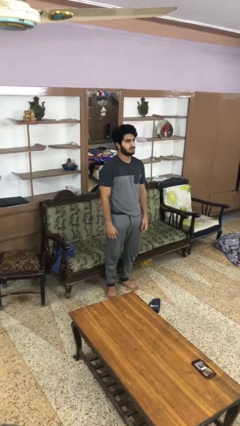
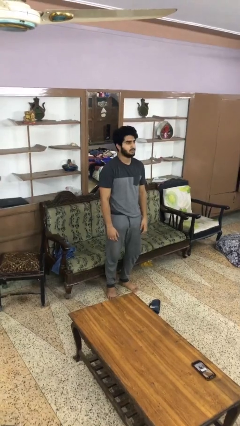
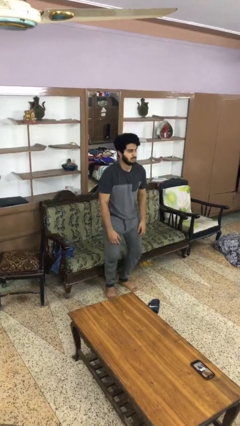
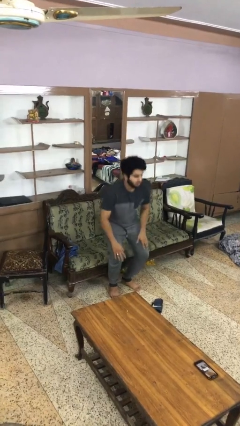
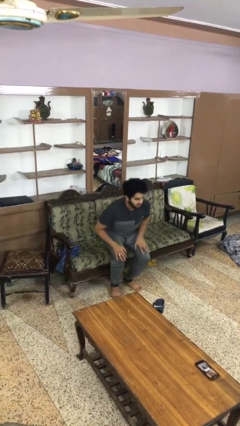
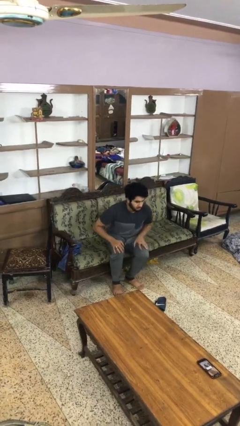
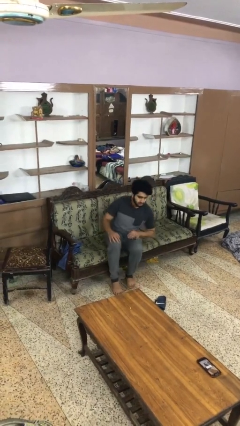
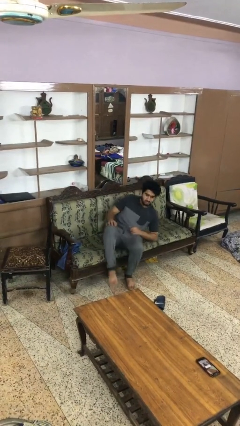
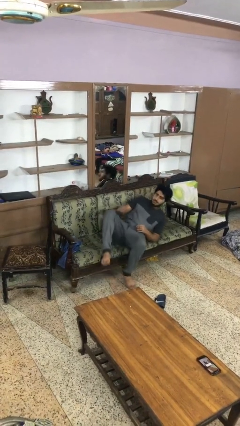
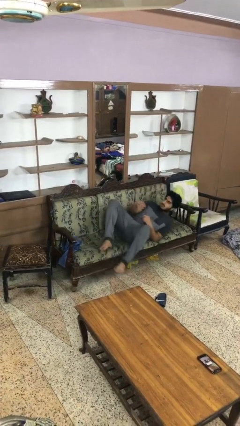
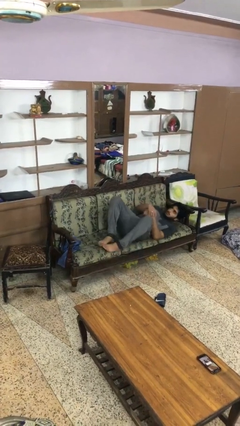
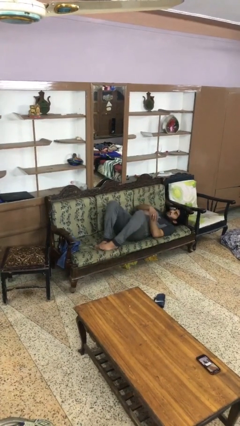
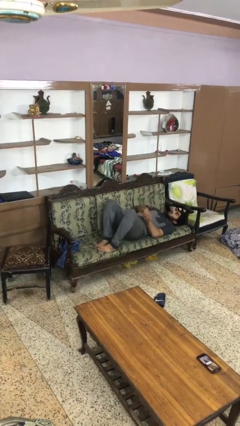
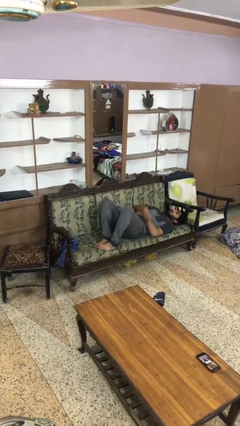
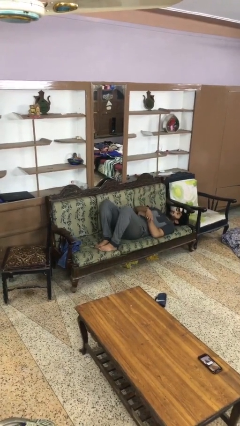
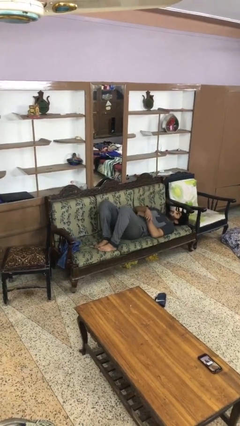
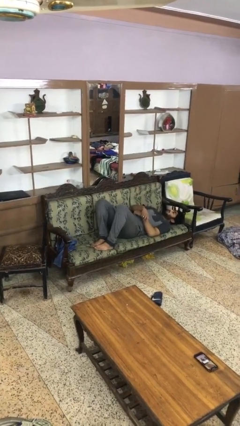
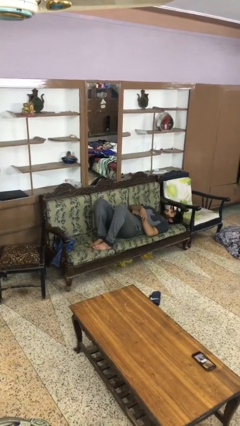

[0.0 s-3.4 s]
person lies down on couch

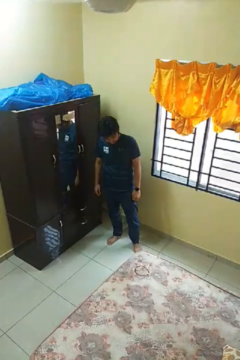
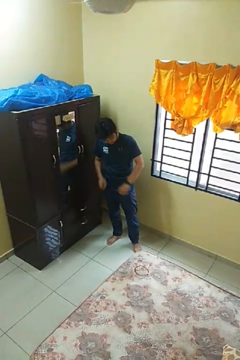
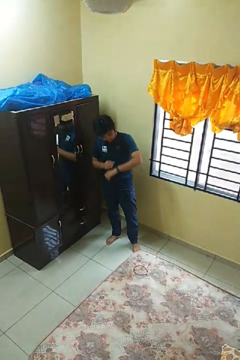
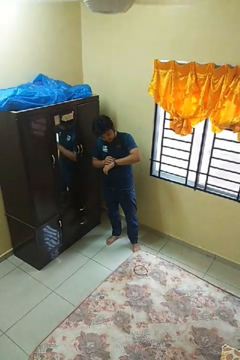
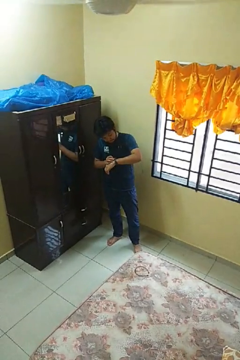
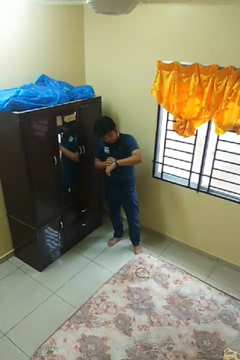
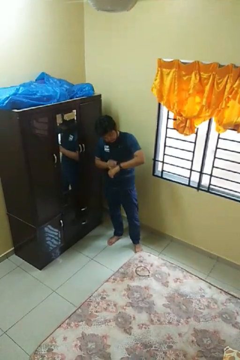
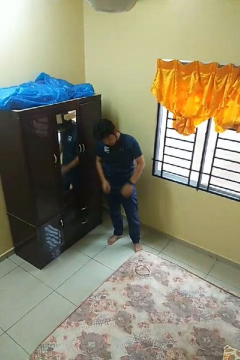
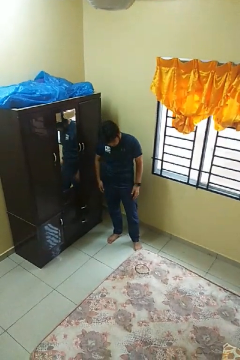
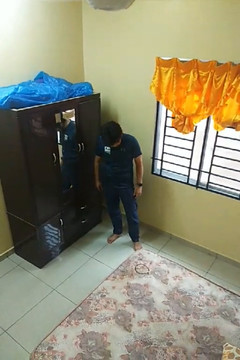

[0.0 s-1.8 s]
person looks at wristwatch

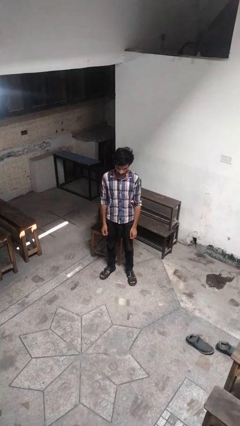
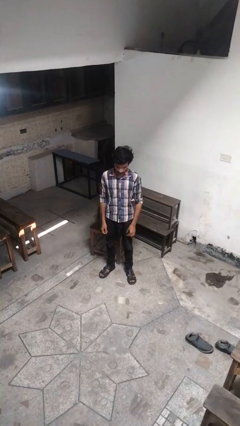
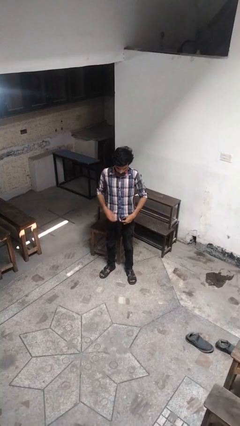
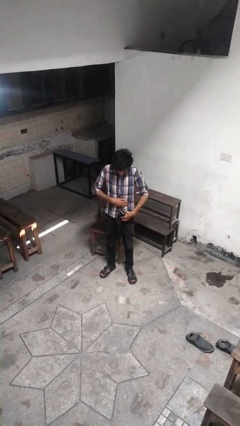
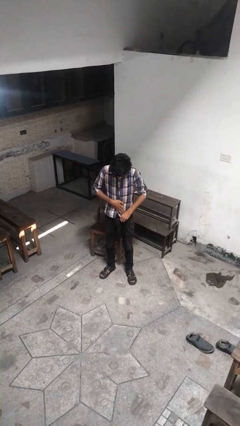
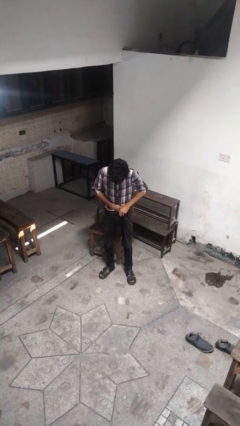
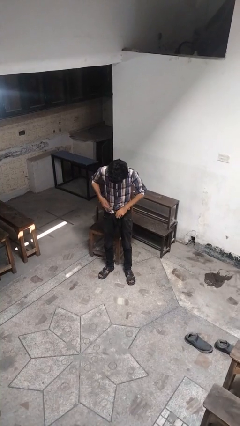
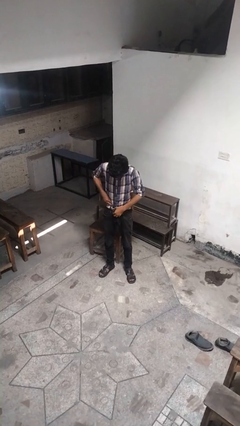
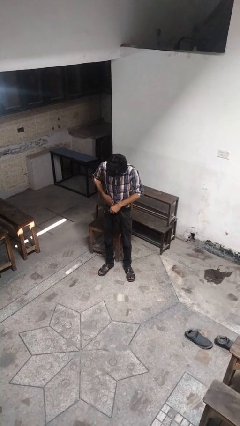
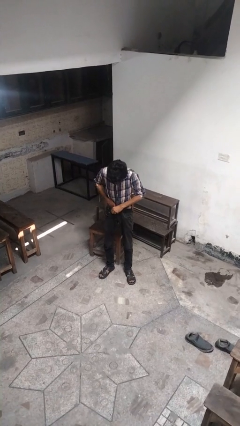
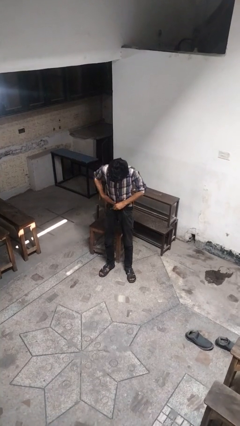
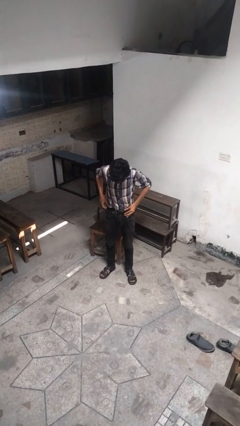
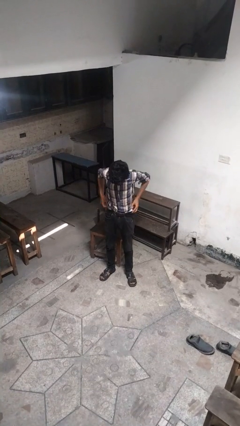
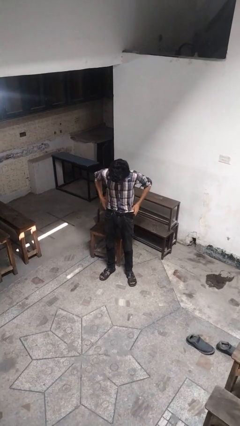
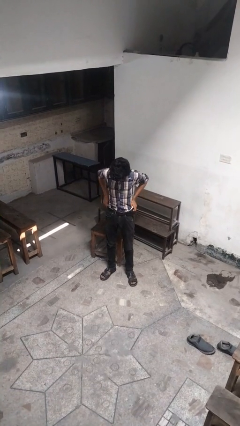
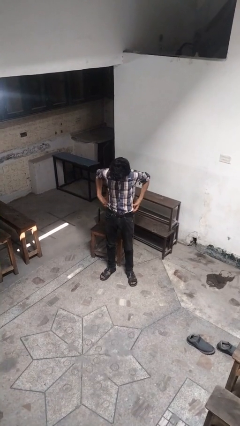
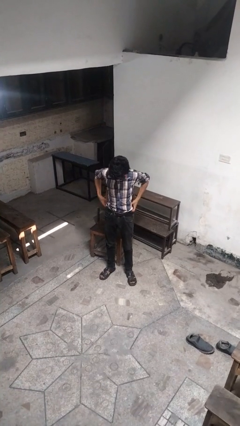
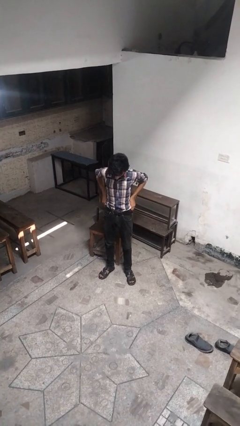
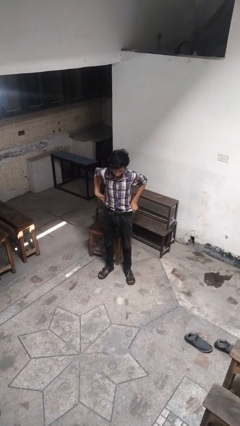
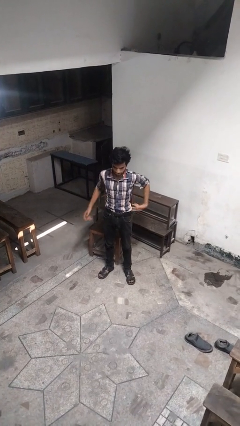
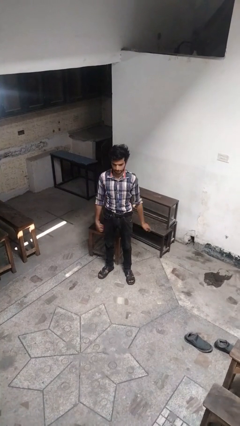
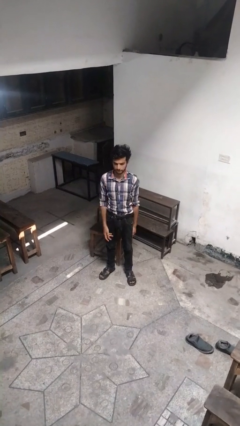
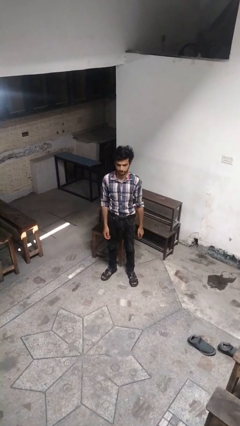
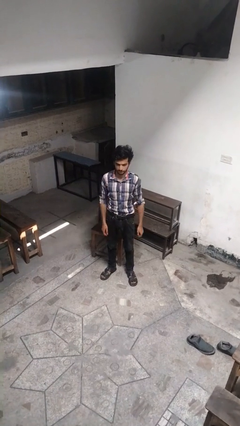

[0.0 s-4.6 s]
person tucks in shirt

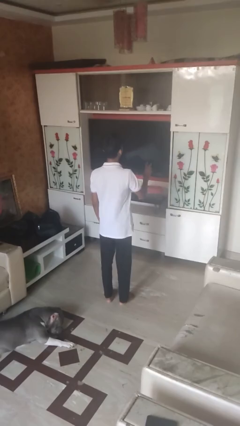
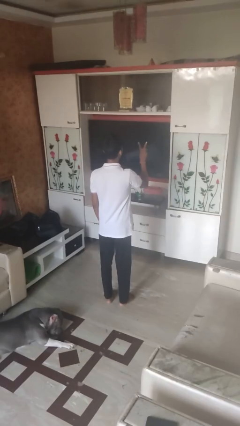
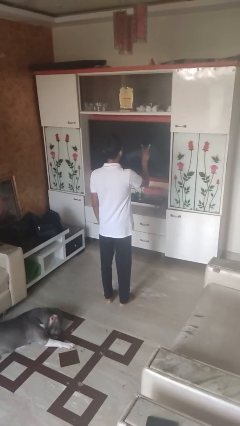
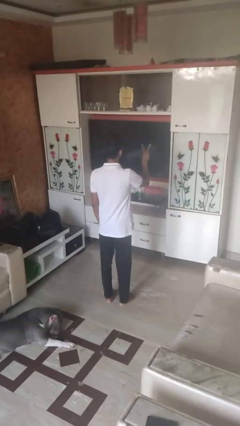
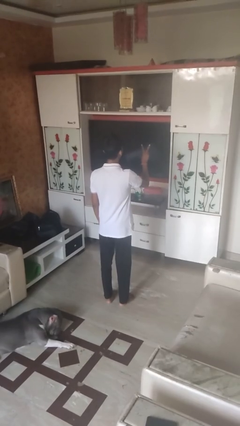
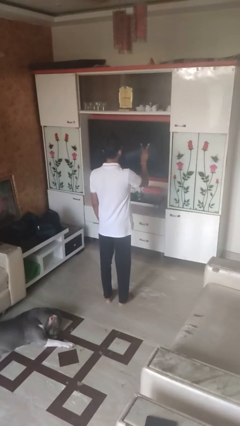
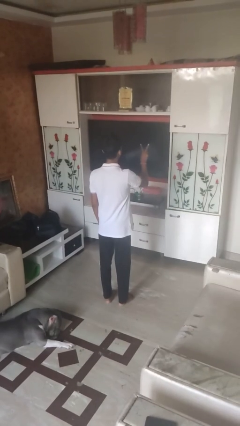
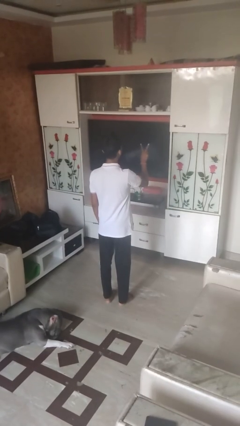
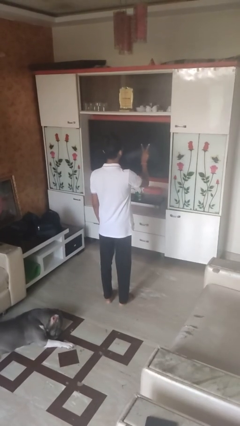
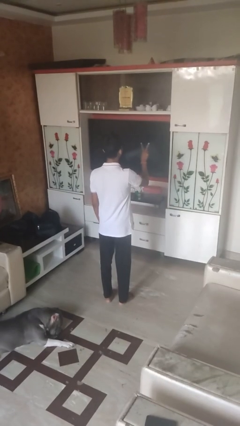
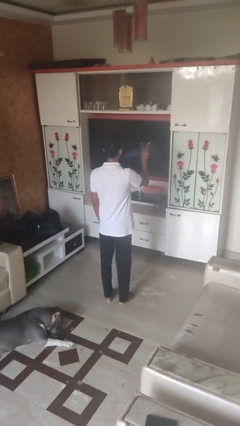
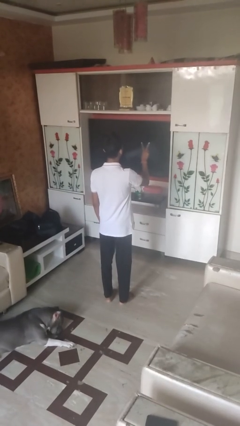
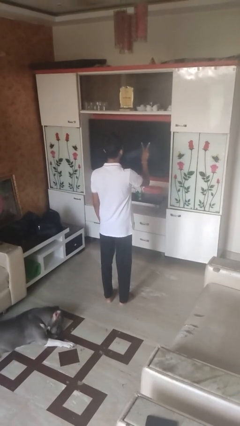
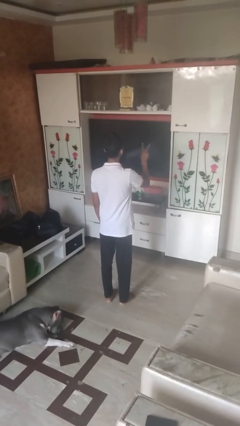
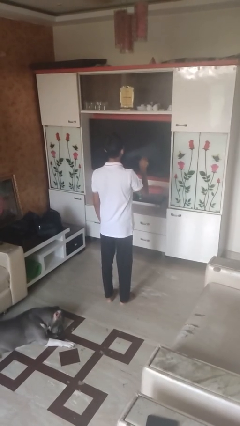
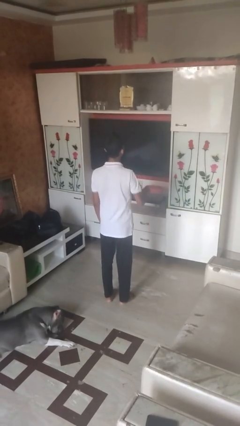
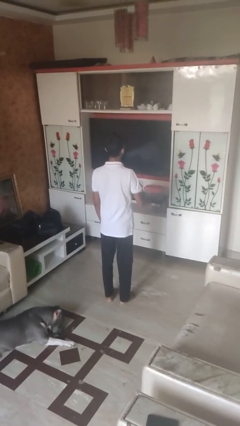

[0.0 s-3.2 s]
person gestures peace

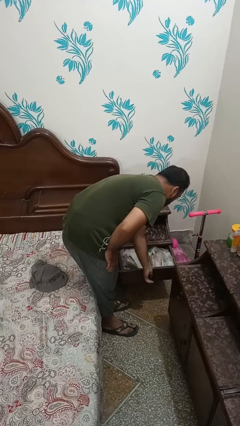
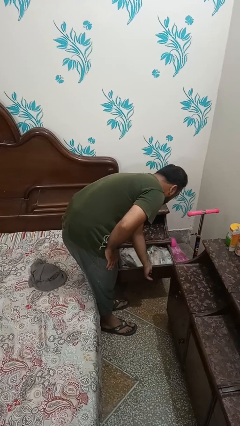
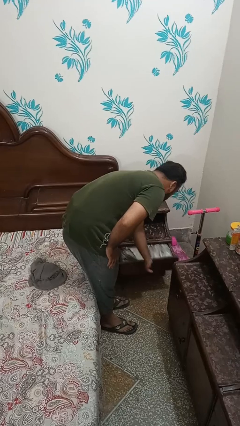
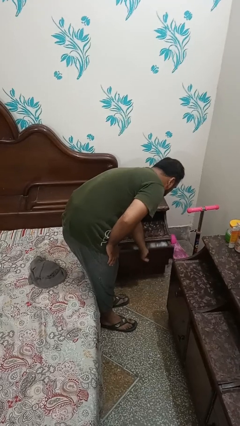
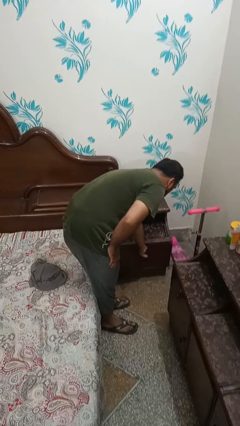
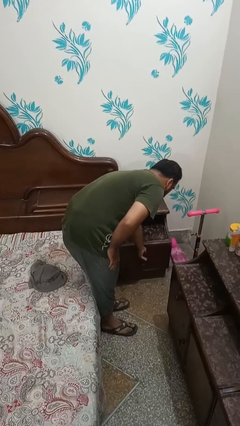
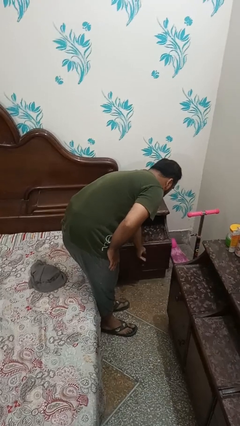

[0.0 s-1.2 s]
person closes dresser drawer

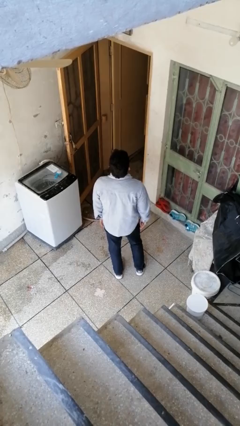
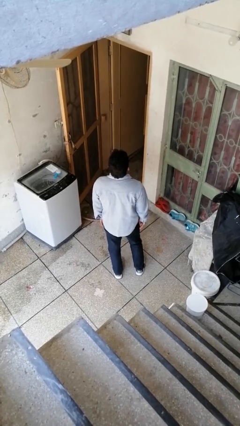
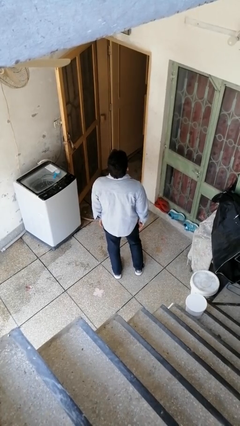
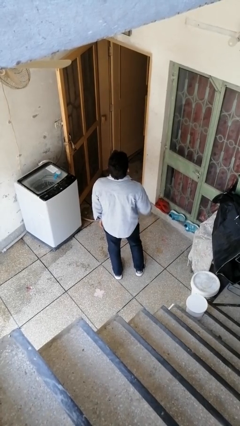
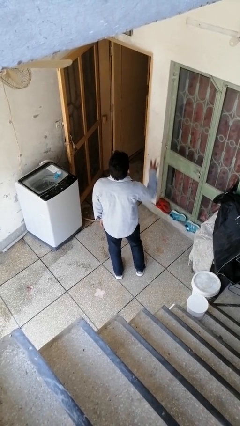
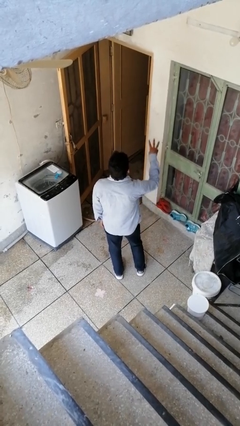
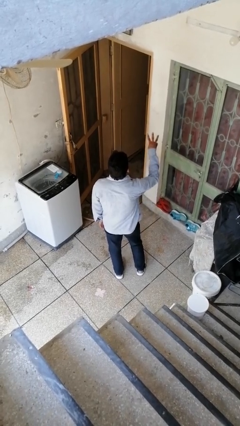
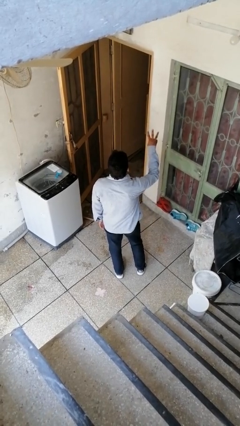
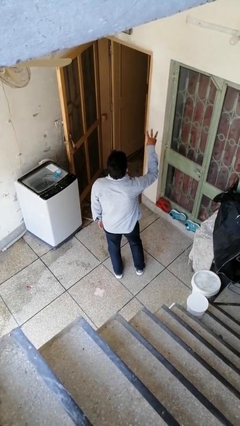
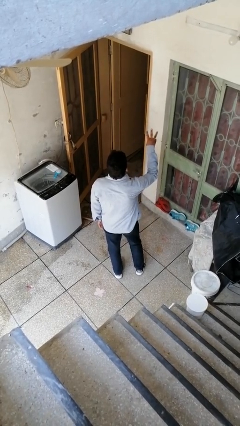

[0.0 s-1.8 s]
person gestures number three

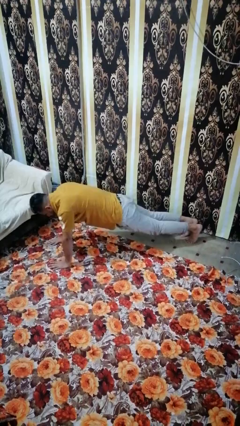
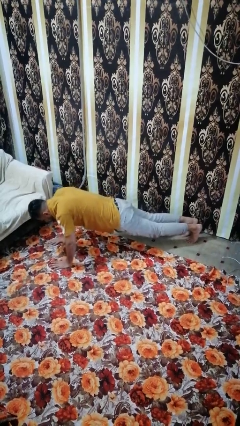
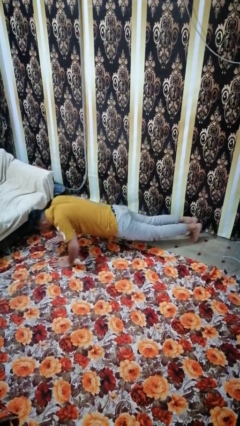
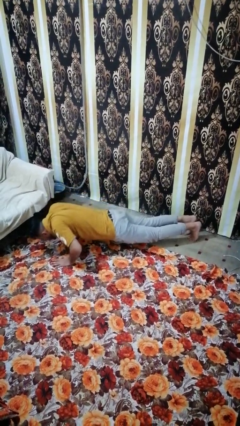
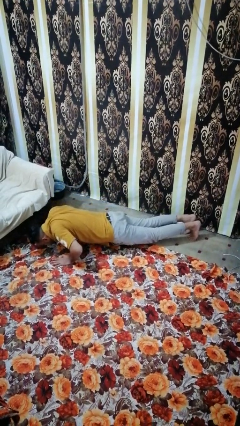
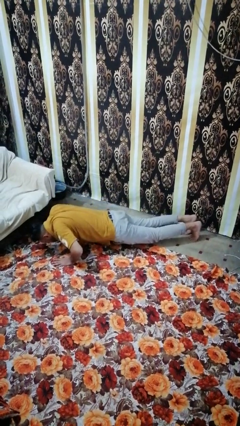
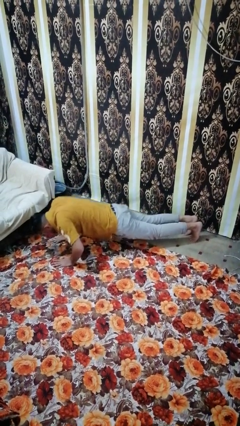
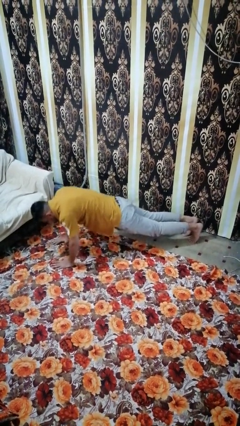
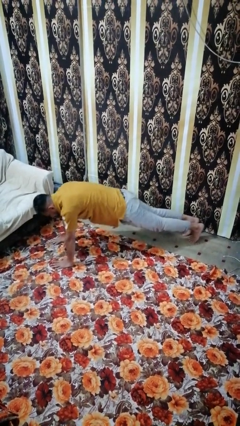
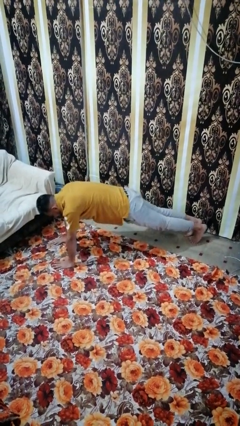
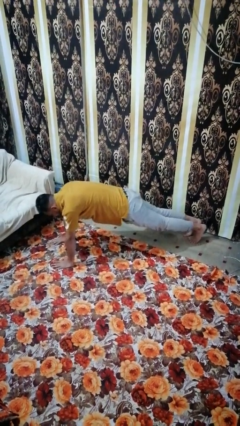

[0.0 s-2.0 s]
person exercises with pushup
